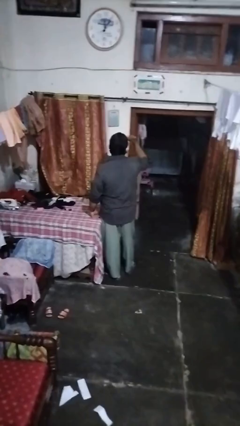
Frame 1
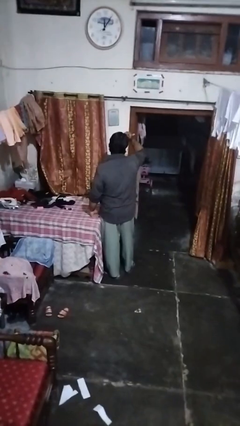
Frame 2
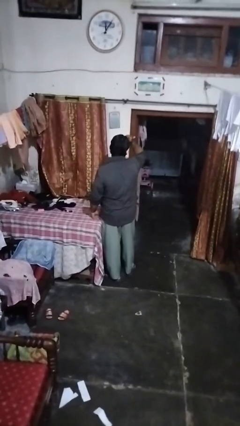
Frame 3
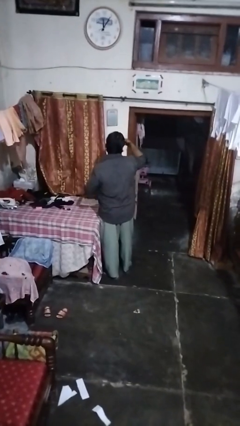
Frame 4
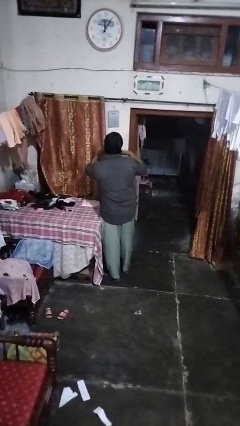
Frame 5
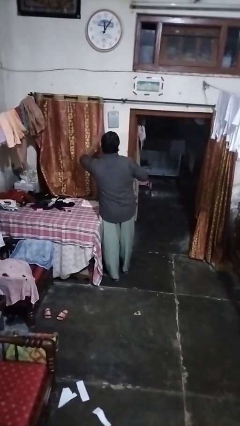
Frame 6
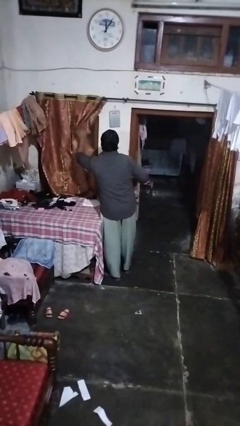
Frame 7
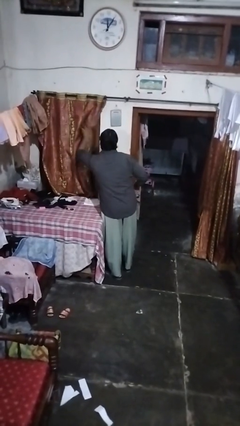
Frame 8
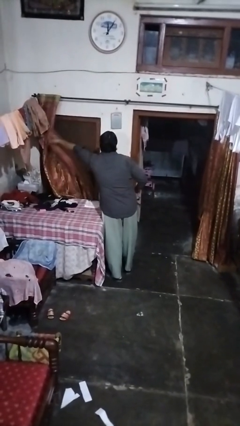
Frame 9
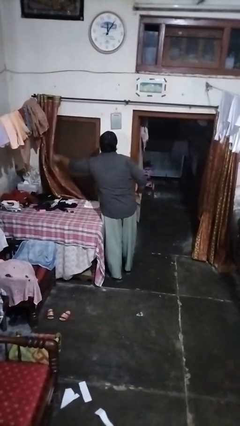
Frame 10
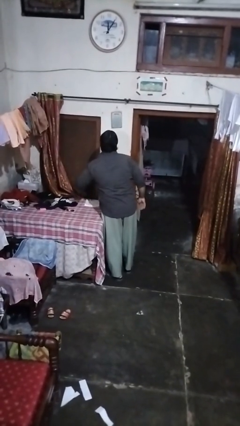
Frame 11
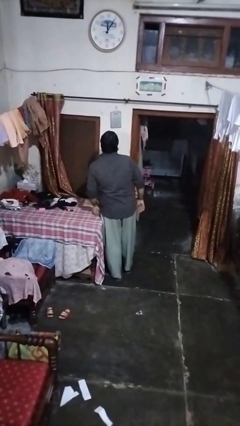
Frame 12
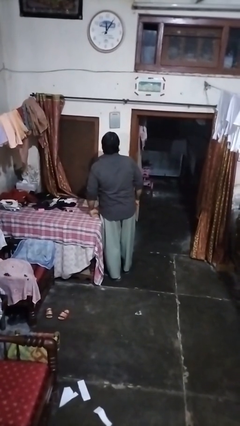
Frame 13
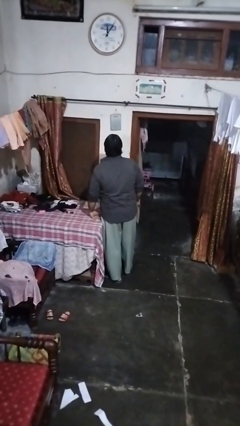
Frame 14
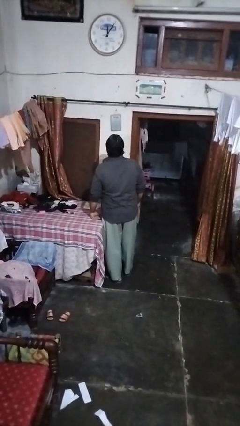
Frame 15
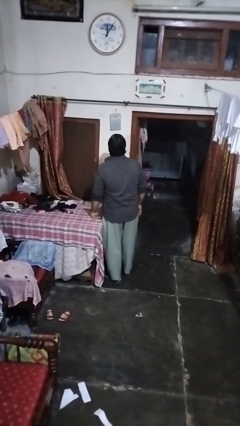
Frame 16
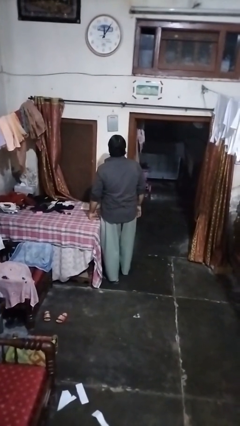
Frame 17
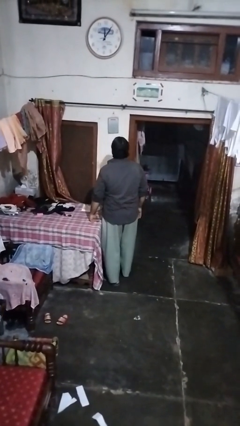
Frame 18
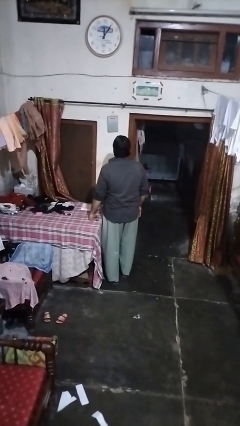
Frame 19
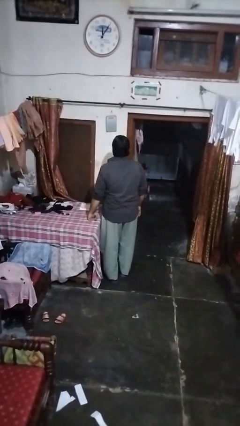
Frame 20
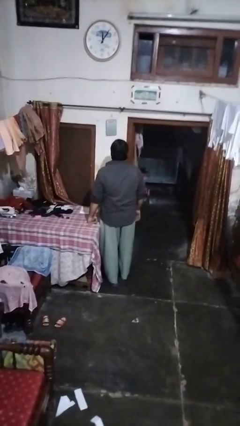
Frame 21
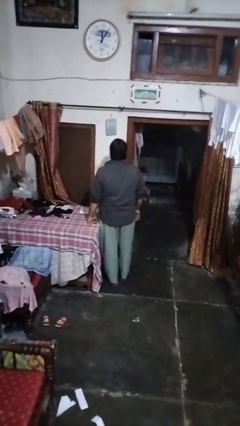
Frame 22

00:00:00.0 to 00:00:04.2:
person opens curtains

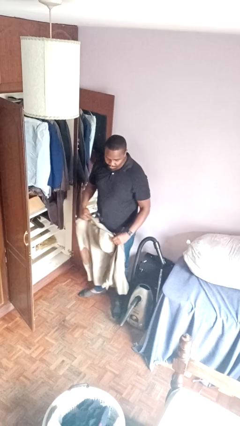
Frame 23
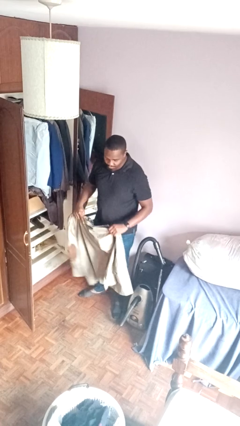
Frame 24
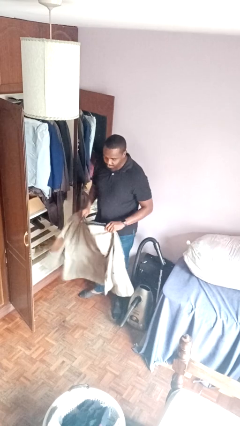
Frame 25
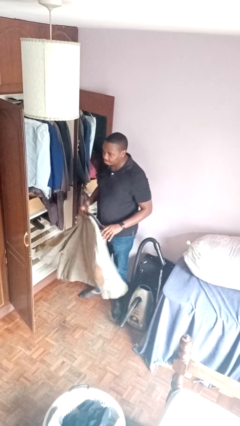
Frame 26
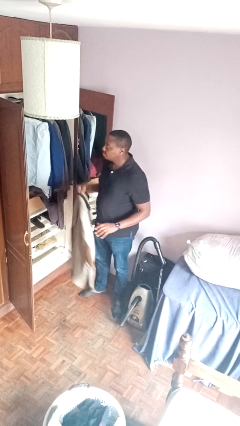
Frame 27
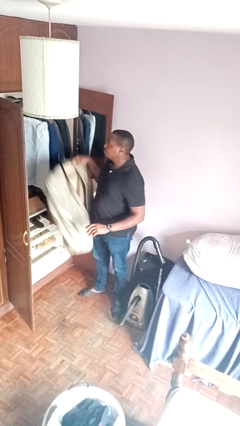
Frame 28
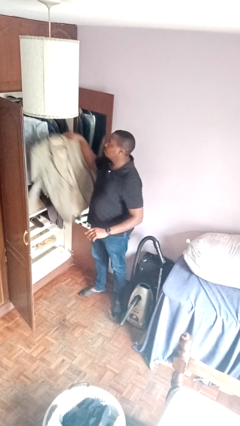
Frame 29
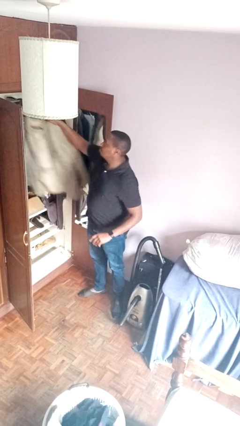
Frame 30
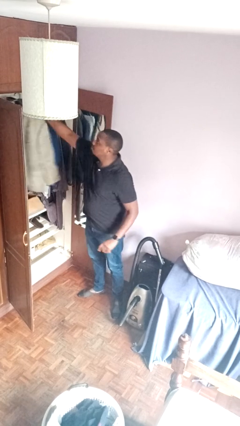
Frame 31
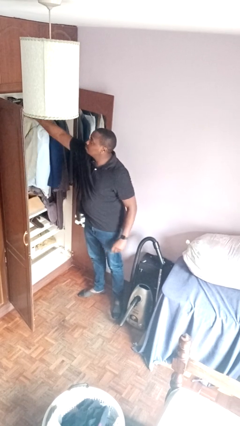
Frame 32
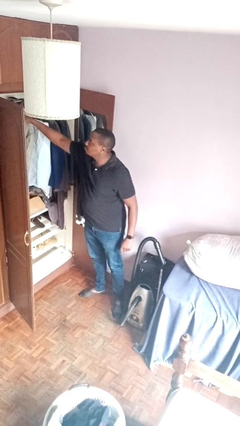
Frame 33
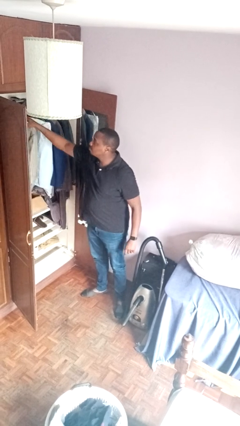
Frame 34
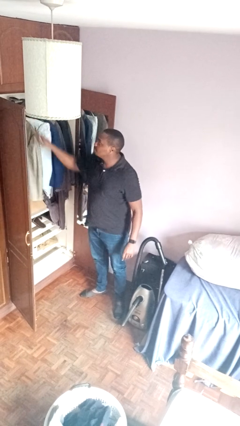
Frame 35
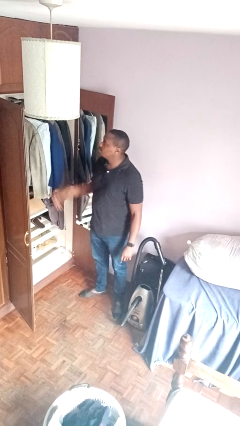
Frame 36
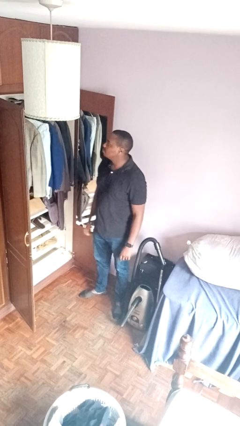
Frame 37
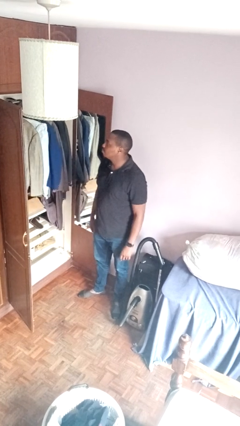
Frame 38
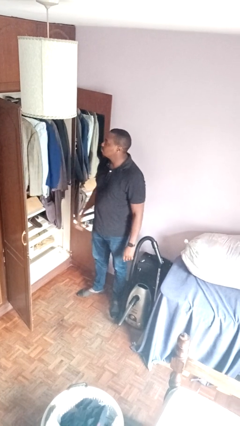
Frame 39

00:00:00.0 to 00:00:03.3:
person puts clothes into closet

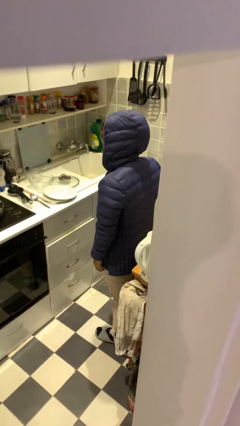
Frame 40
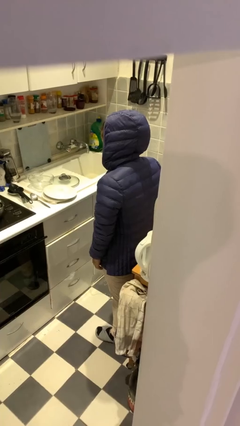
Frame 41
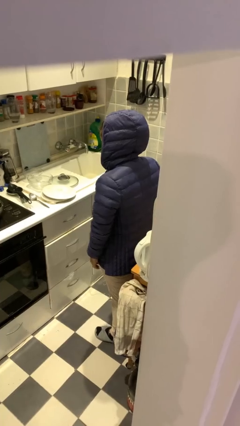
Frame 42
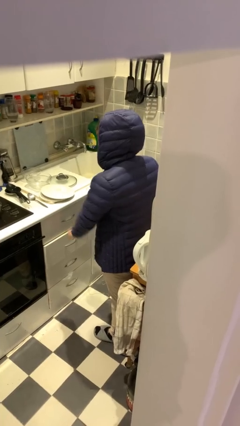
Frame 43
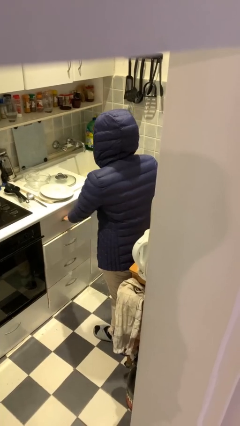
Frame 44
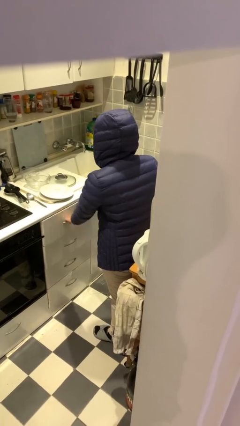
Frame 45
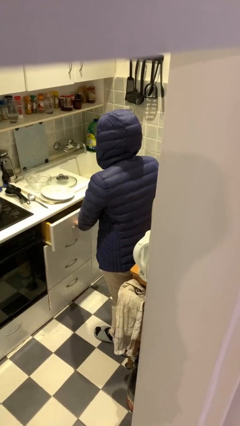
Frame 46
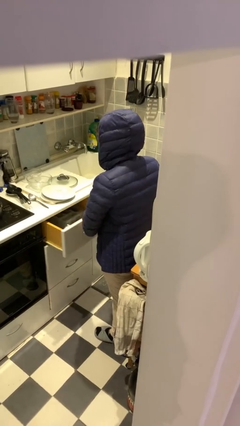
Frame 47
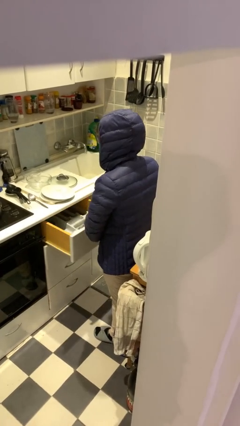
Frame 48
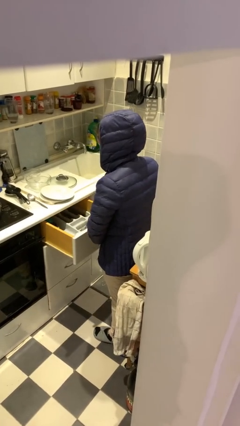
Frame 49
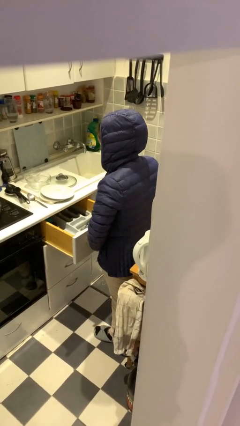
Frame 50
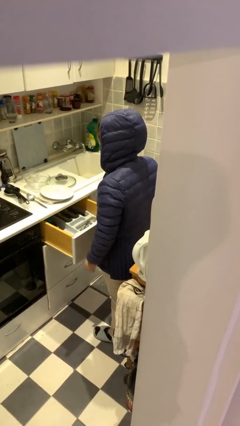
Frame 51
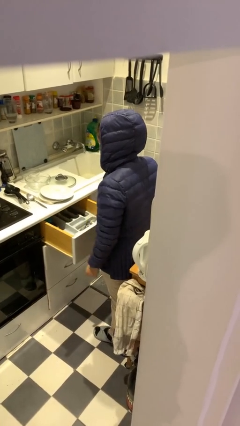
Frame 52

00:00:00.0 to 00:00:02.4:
person opens kitchen drawer

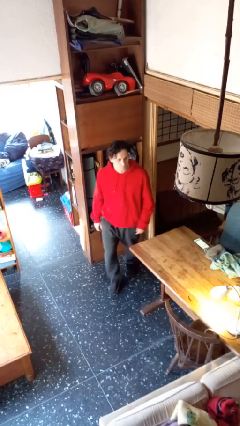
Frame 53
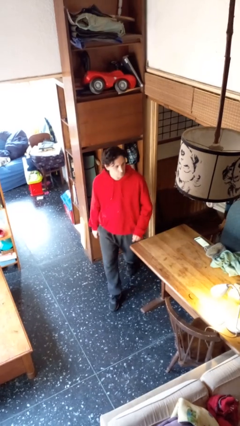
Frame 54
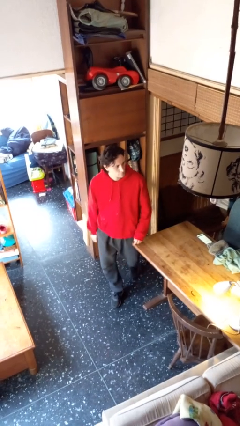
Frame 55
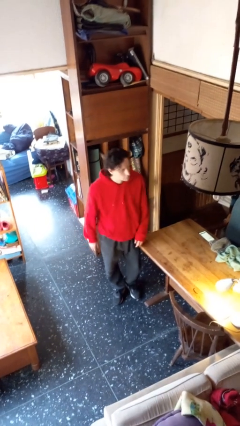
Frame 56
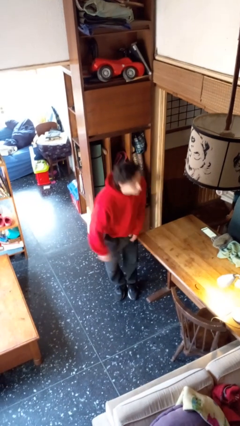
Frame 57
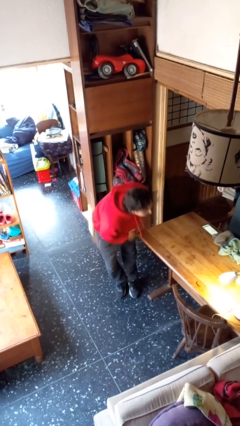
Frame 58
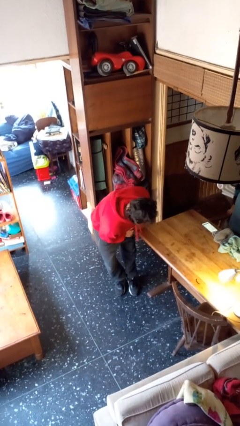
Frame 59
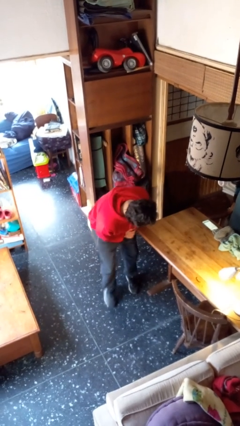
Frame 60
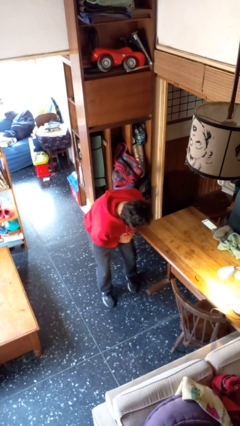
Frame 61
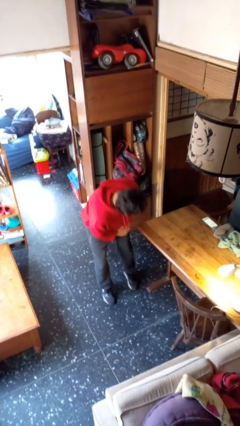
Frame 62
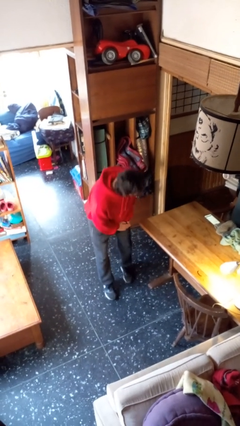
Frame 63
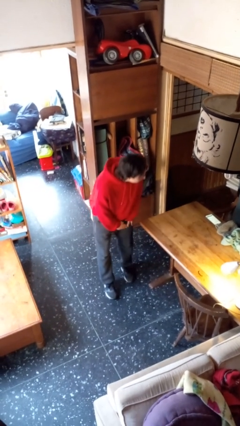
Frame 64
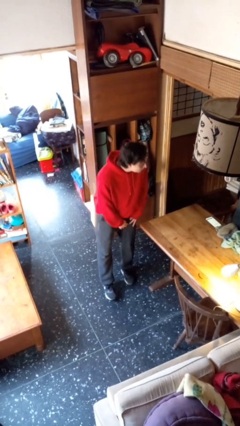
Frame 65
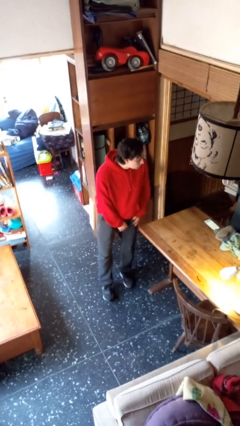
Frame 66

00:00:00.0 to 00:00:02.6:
person bumps into table

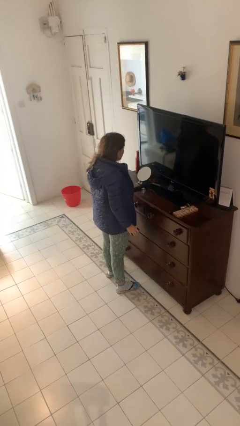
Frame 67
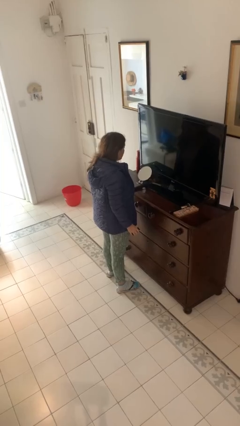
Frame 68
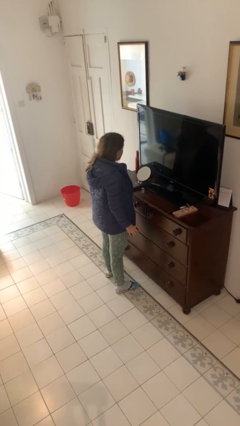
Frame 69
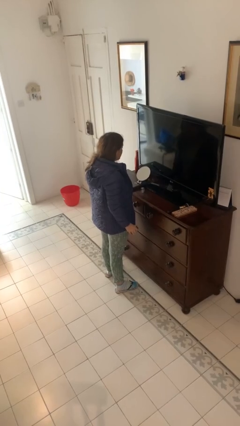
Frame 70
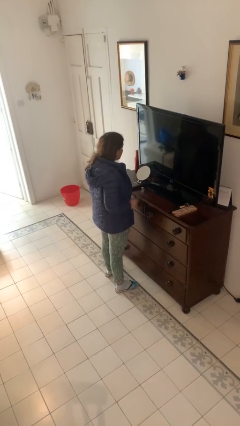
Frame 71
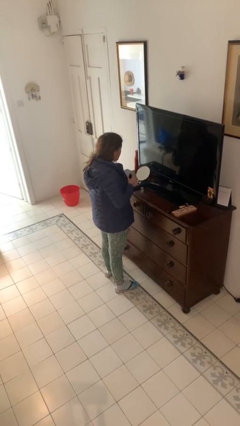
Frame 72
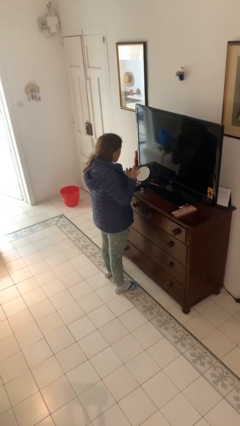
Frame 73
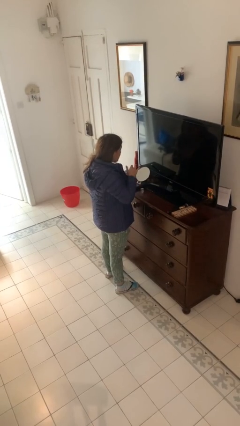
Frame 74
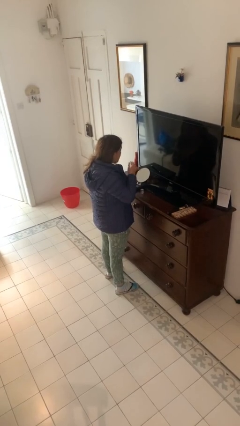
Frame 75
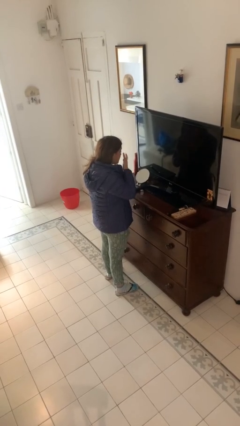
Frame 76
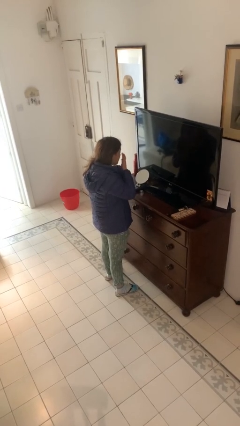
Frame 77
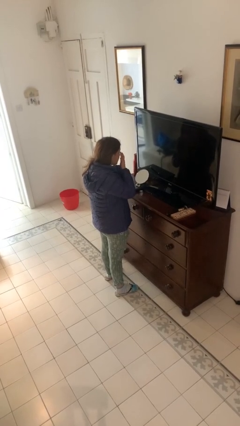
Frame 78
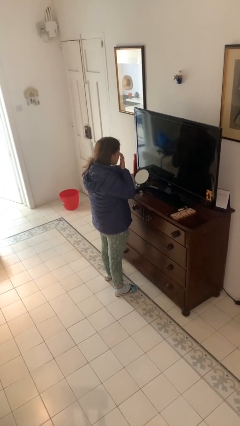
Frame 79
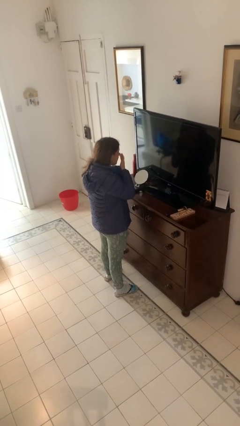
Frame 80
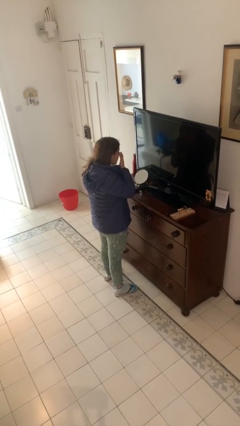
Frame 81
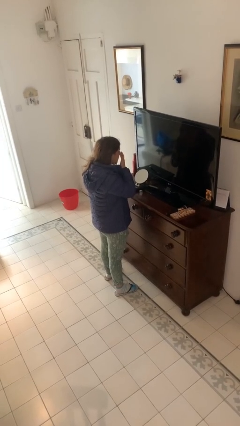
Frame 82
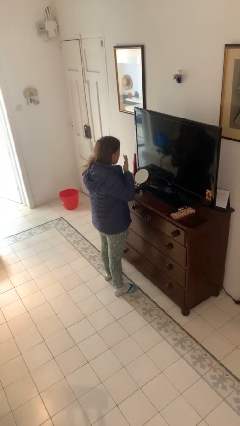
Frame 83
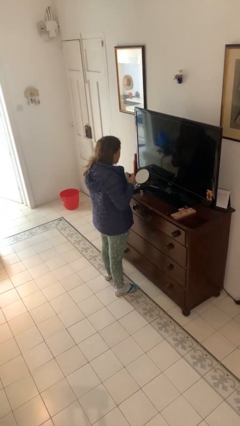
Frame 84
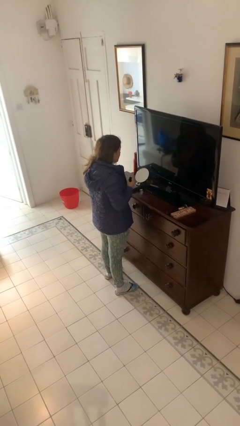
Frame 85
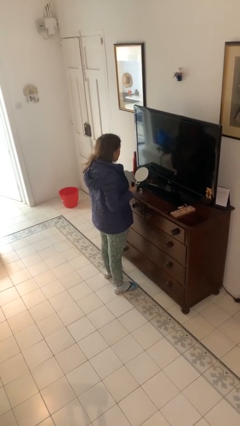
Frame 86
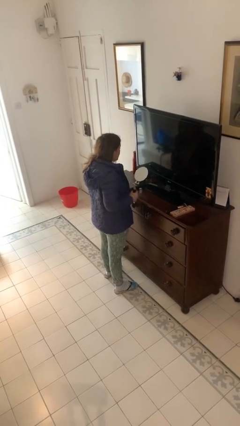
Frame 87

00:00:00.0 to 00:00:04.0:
person applies foundation makeup

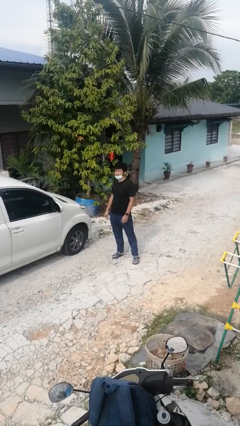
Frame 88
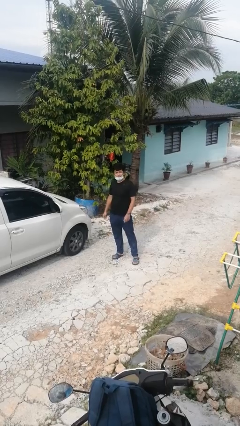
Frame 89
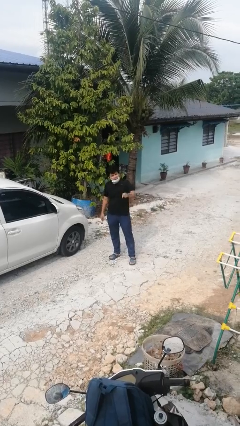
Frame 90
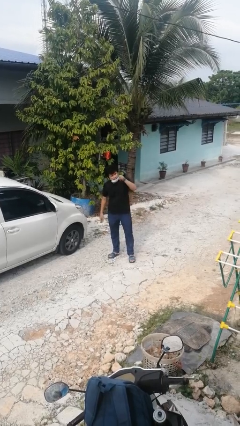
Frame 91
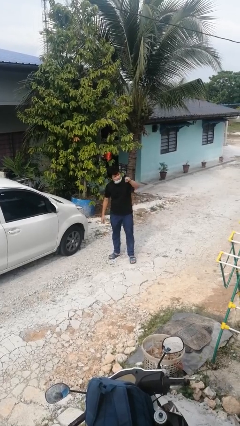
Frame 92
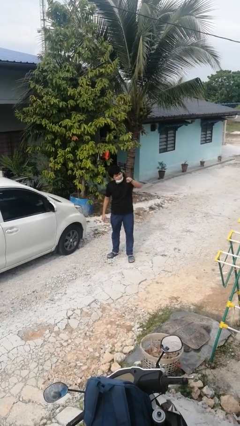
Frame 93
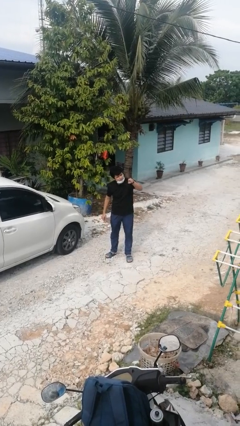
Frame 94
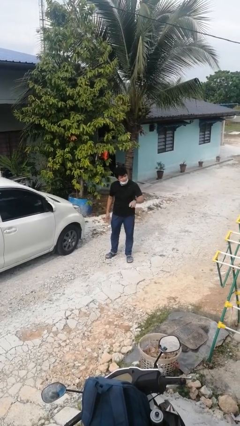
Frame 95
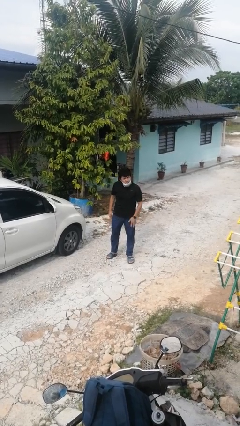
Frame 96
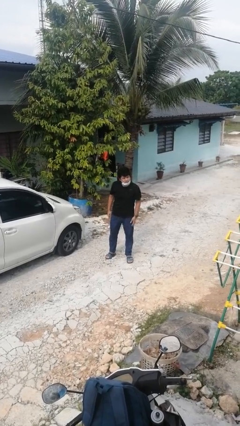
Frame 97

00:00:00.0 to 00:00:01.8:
person points at person
